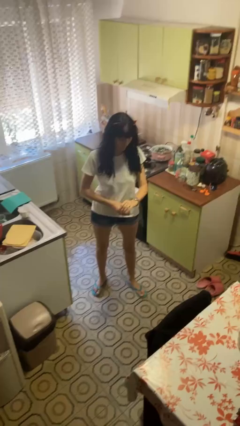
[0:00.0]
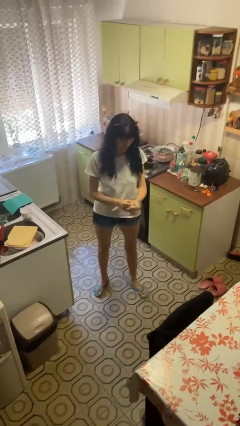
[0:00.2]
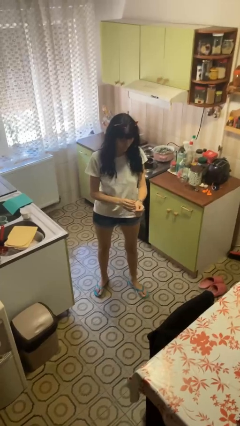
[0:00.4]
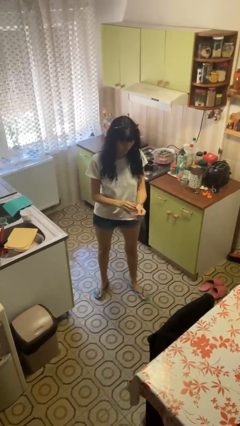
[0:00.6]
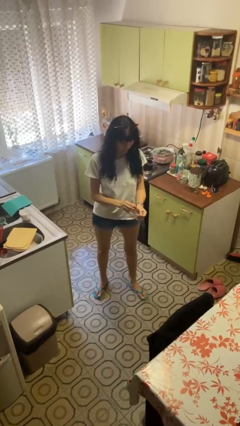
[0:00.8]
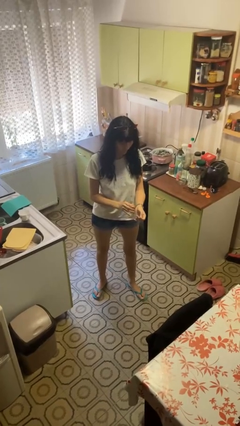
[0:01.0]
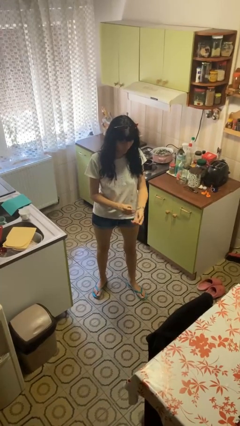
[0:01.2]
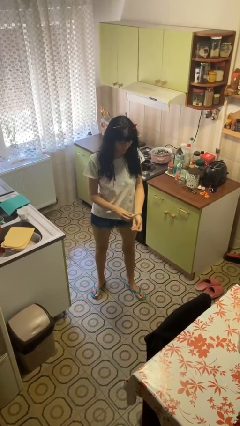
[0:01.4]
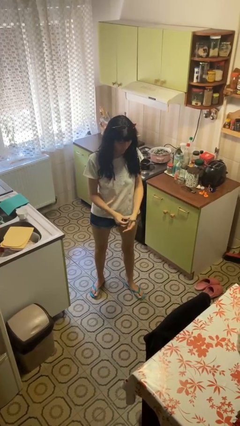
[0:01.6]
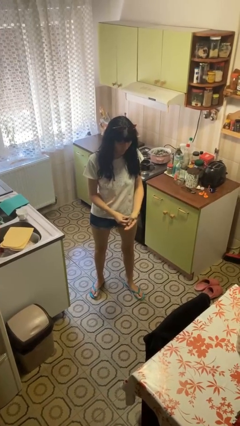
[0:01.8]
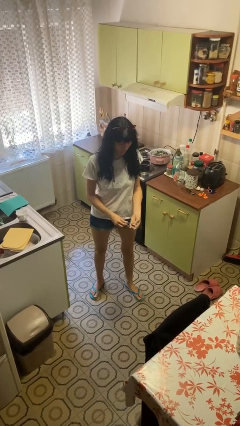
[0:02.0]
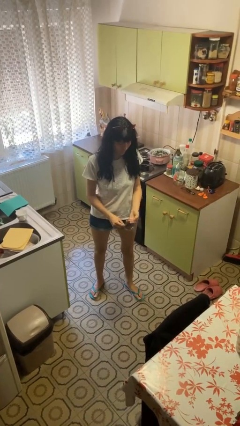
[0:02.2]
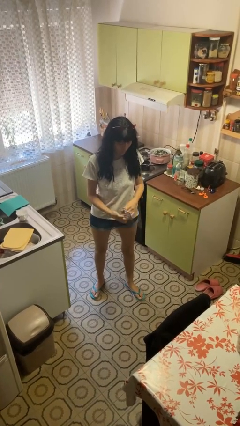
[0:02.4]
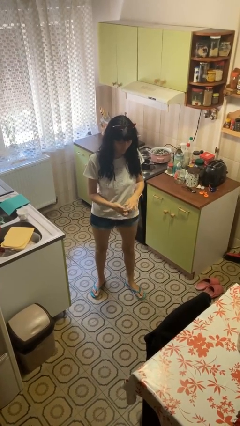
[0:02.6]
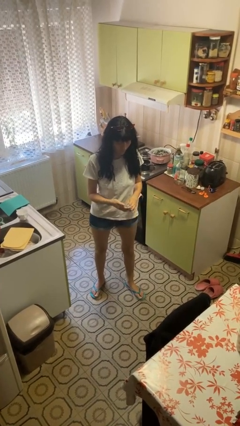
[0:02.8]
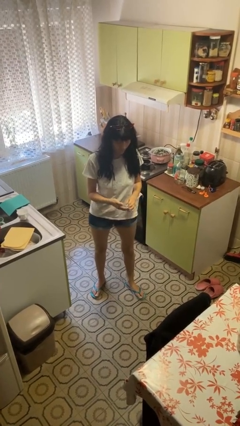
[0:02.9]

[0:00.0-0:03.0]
person takes off wristwatch

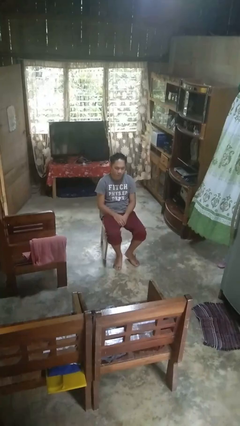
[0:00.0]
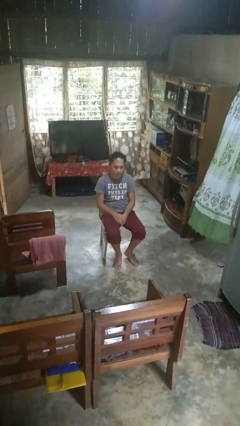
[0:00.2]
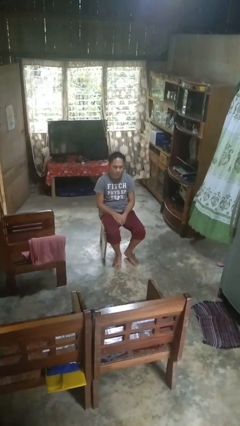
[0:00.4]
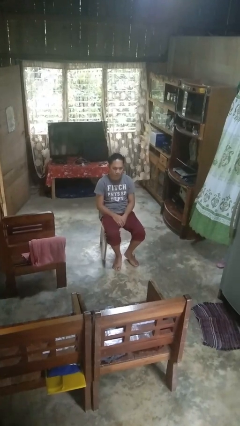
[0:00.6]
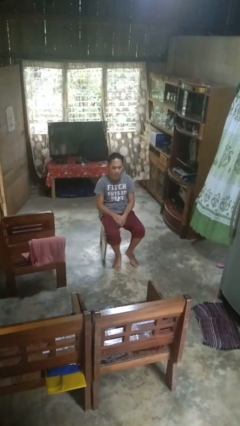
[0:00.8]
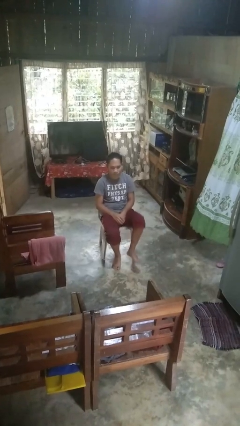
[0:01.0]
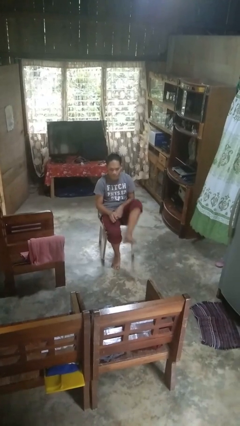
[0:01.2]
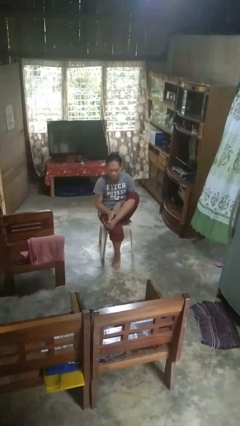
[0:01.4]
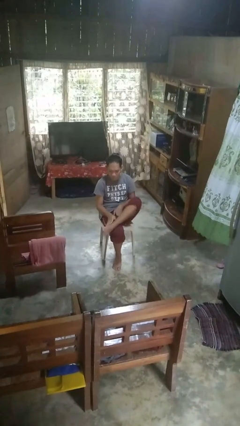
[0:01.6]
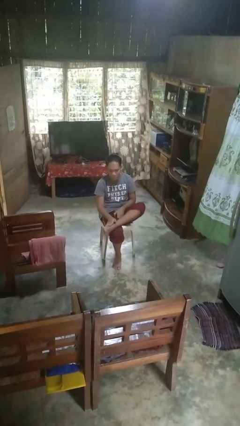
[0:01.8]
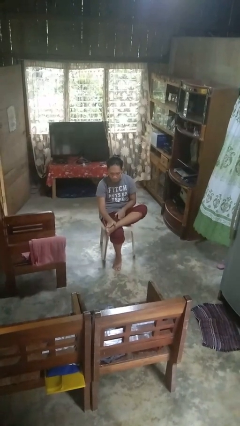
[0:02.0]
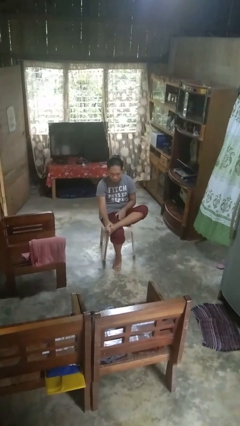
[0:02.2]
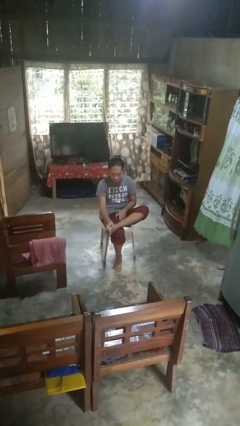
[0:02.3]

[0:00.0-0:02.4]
person rubs foot

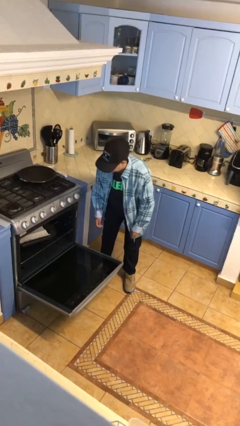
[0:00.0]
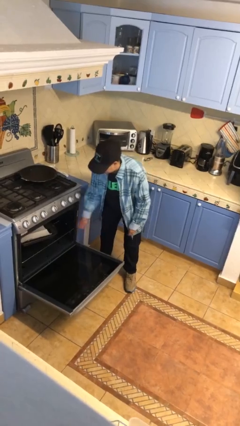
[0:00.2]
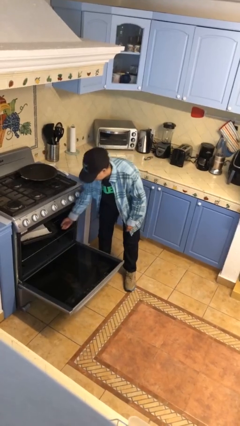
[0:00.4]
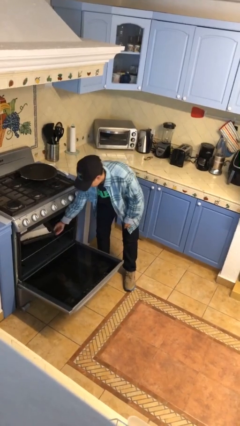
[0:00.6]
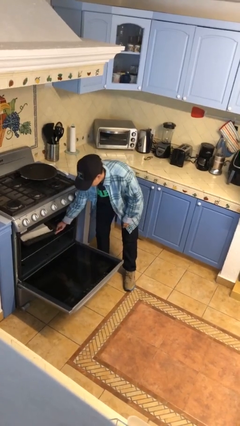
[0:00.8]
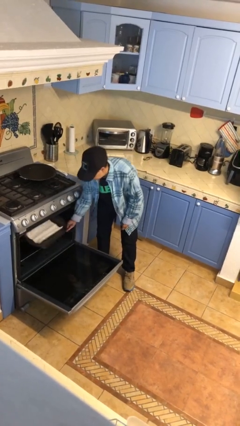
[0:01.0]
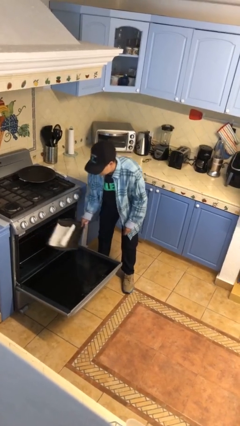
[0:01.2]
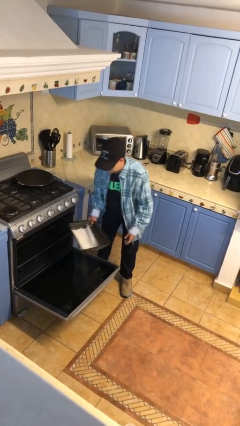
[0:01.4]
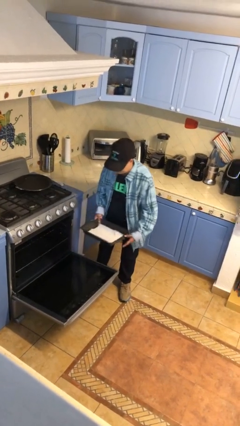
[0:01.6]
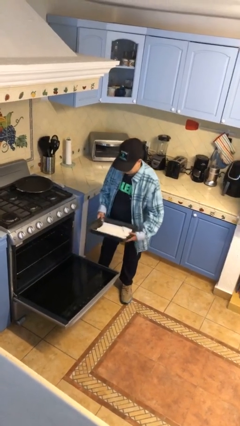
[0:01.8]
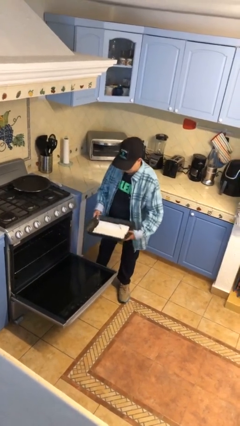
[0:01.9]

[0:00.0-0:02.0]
person takes object from oven

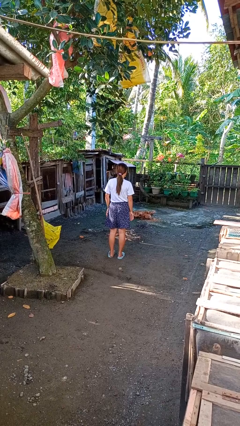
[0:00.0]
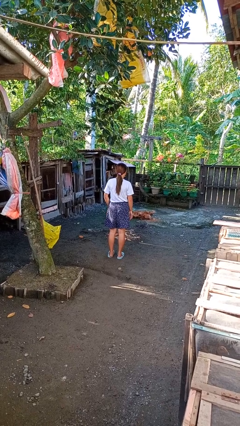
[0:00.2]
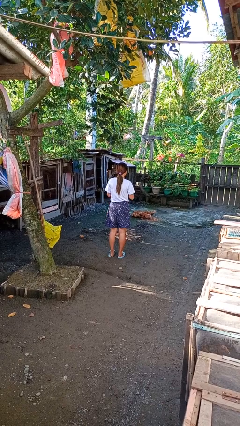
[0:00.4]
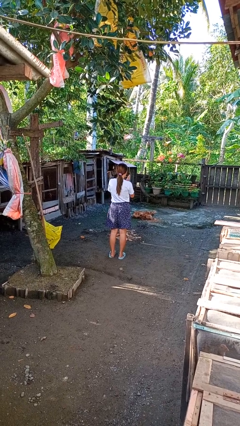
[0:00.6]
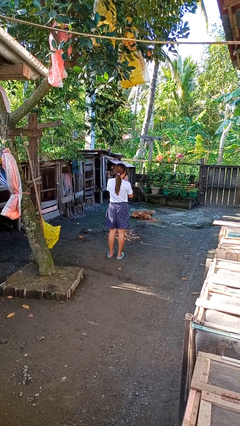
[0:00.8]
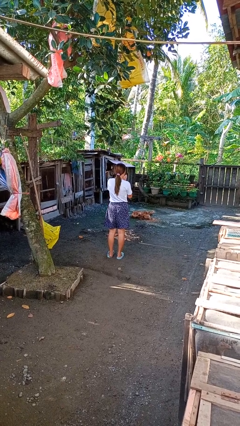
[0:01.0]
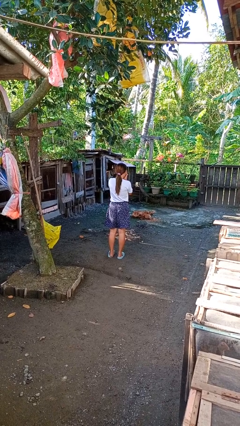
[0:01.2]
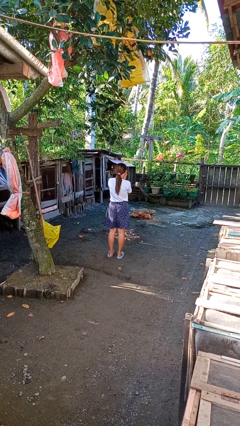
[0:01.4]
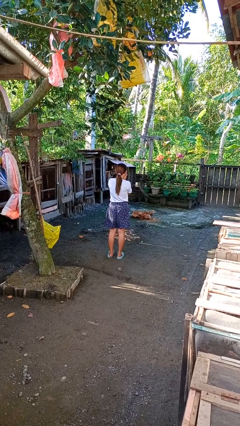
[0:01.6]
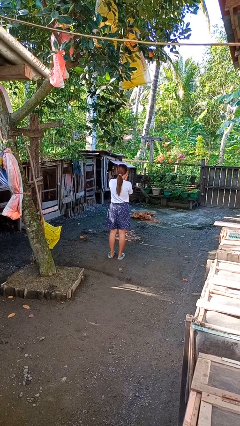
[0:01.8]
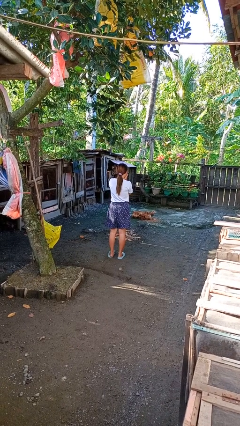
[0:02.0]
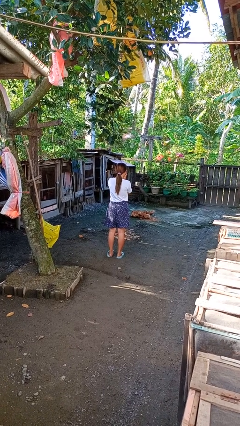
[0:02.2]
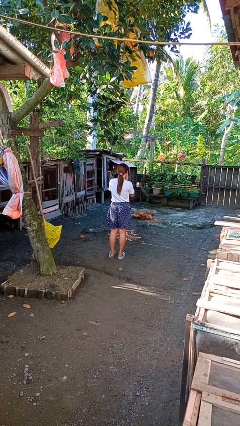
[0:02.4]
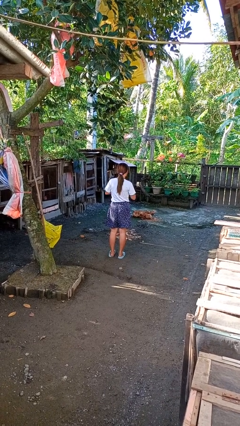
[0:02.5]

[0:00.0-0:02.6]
person blows into hands

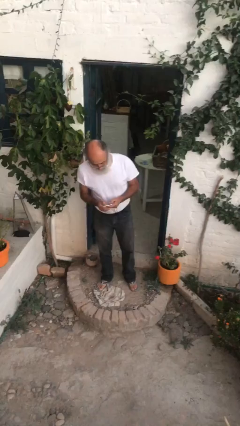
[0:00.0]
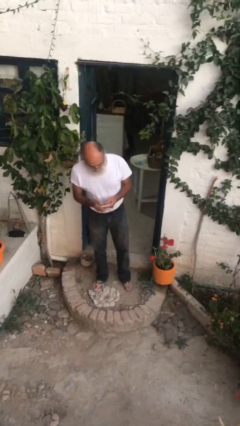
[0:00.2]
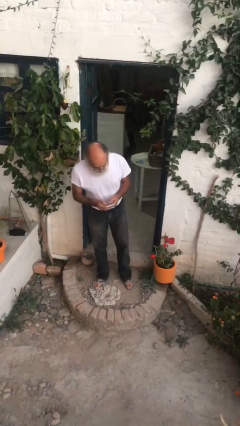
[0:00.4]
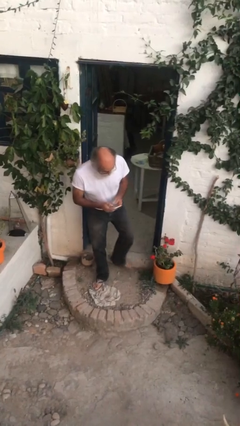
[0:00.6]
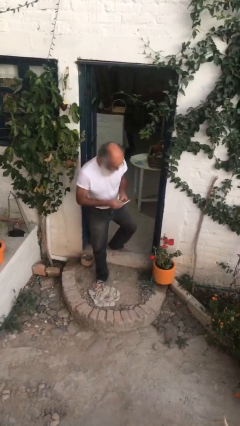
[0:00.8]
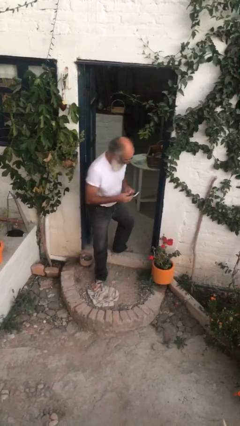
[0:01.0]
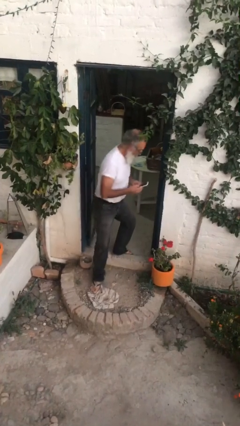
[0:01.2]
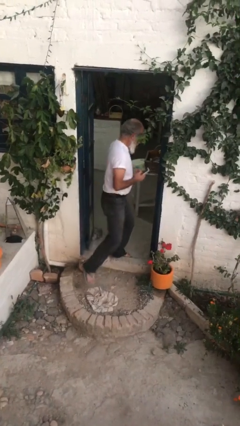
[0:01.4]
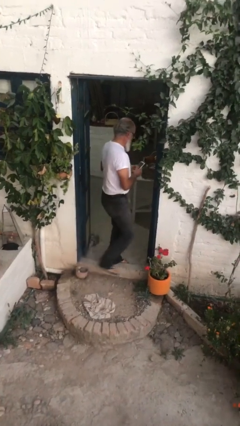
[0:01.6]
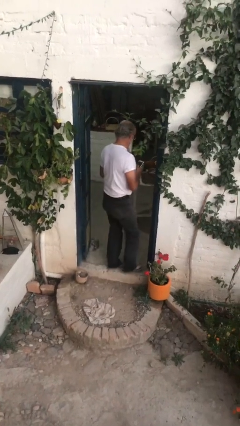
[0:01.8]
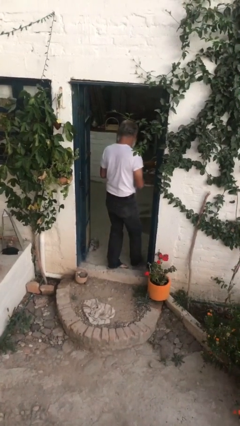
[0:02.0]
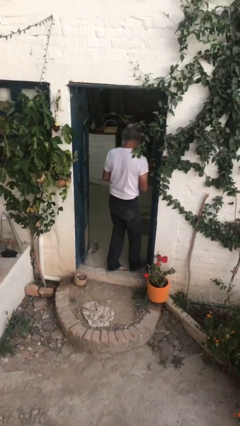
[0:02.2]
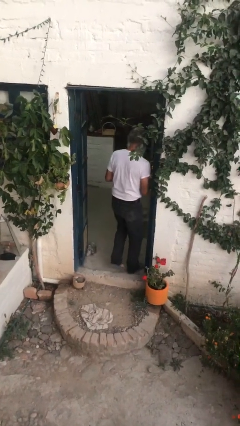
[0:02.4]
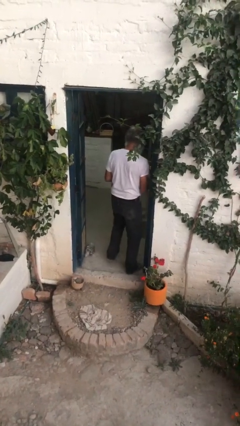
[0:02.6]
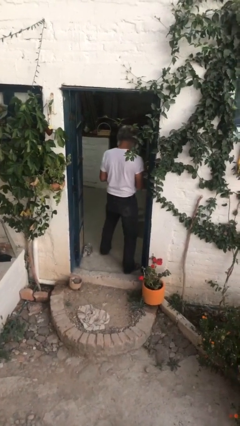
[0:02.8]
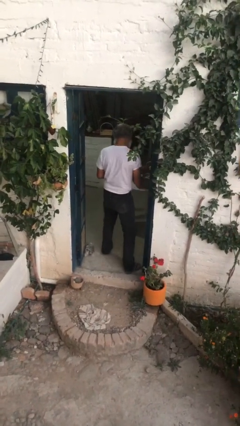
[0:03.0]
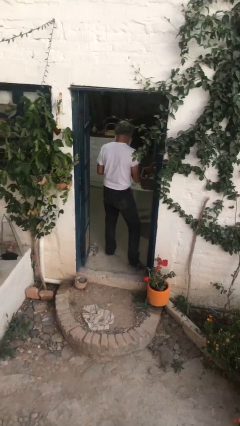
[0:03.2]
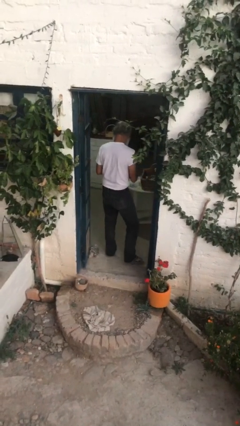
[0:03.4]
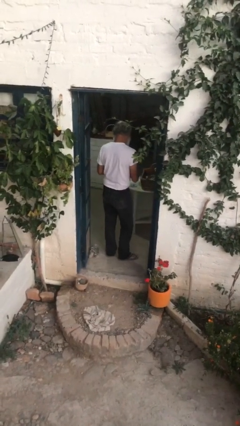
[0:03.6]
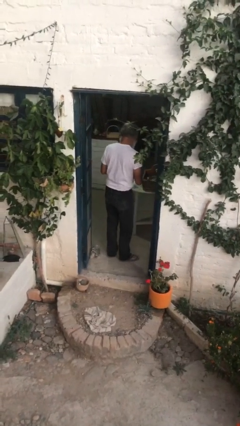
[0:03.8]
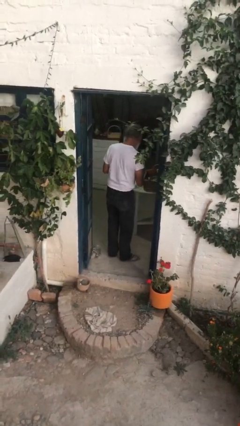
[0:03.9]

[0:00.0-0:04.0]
person exits scene through structure

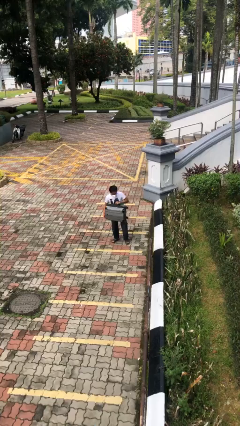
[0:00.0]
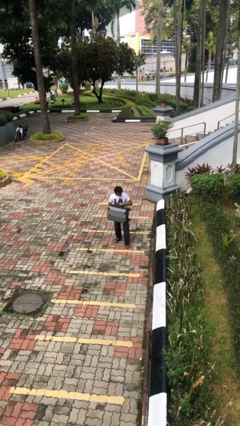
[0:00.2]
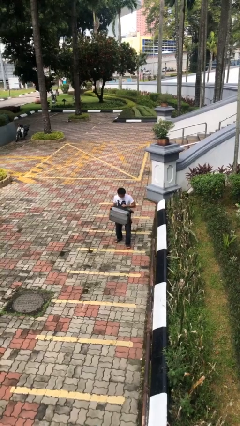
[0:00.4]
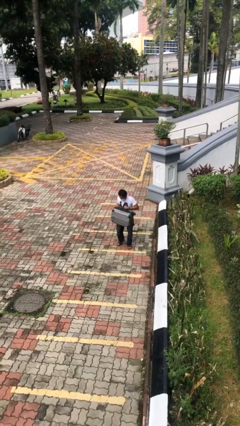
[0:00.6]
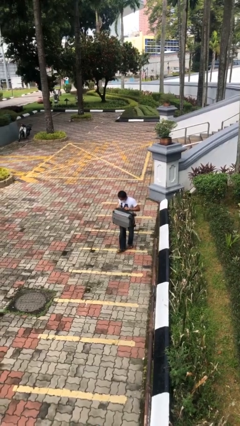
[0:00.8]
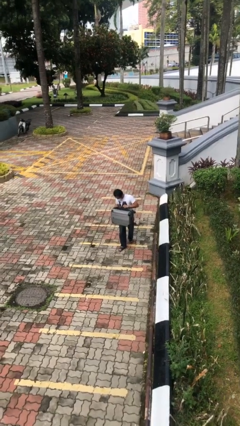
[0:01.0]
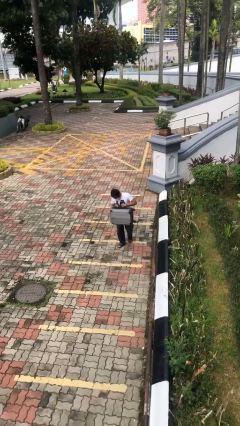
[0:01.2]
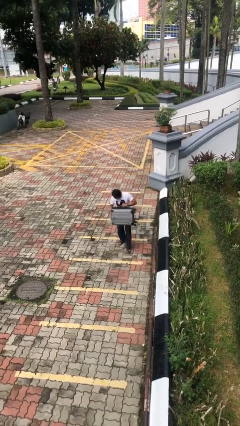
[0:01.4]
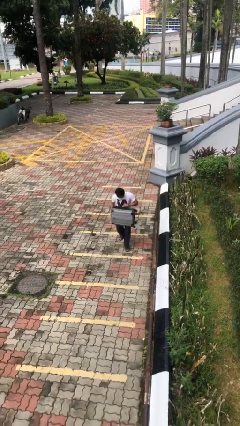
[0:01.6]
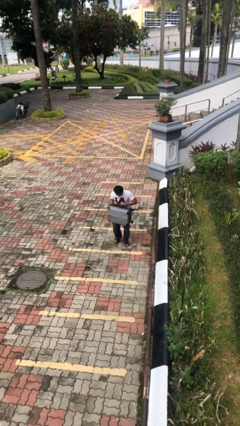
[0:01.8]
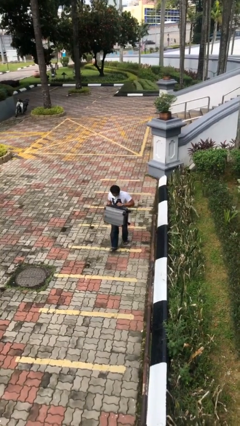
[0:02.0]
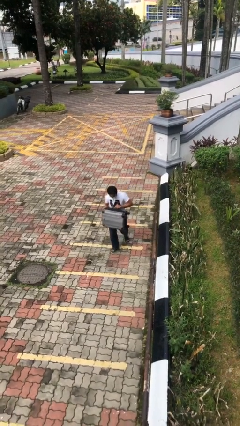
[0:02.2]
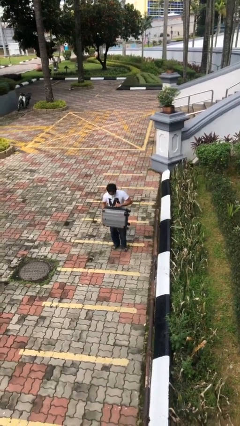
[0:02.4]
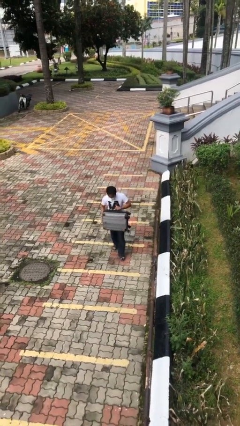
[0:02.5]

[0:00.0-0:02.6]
person carries heavy object

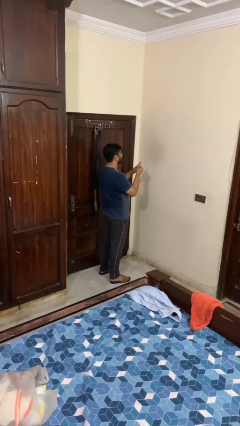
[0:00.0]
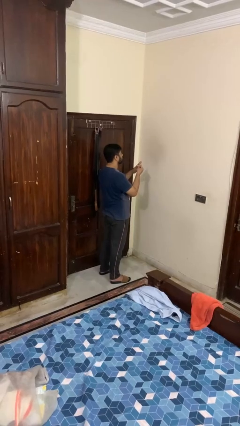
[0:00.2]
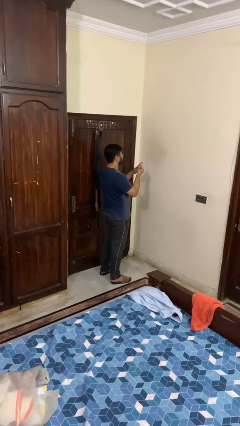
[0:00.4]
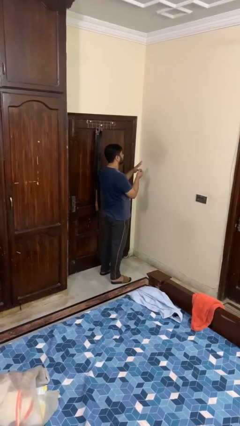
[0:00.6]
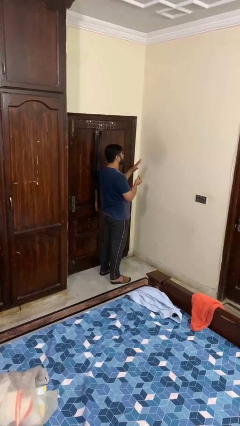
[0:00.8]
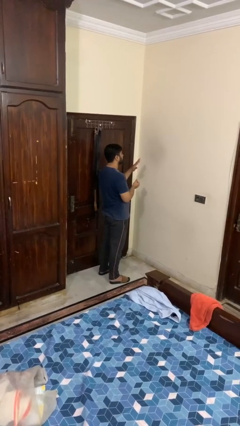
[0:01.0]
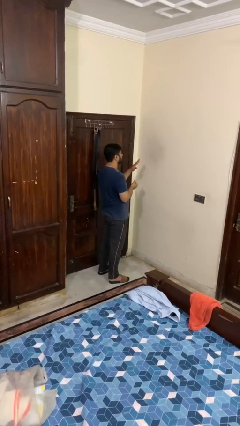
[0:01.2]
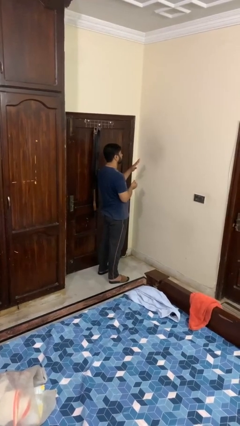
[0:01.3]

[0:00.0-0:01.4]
person puts on ring
